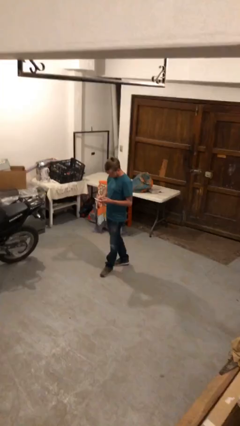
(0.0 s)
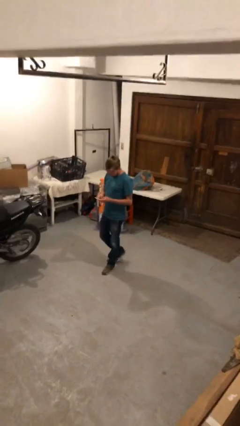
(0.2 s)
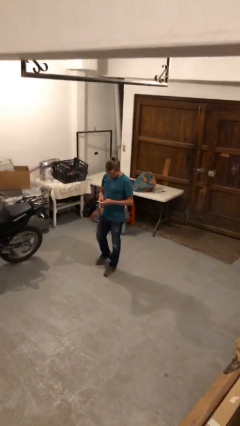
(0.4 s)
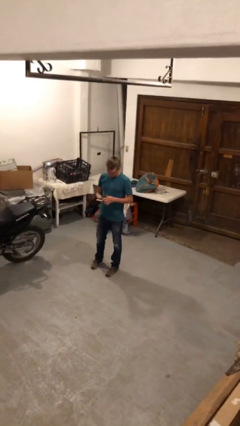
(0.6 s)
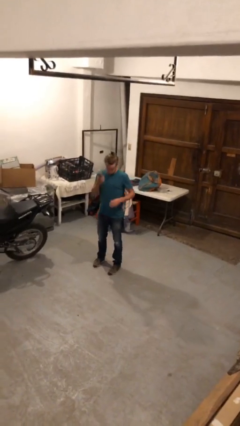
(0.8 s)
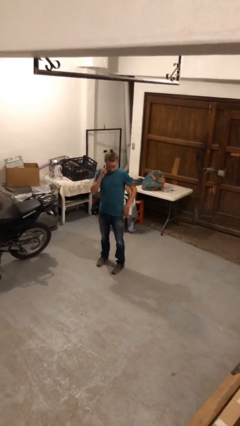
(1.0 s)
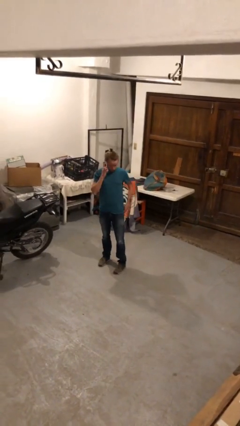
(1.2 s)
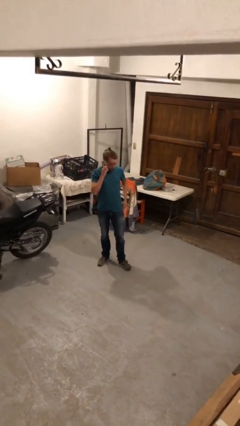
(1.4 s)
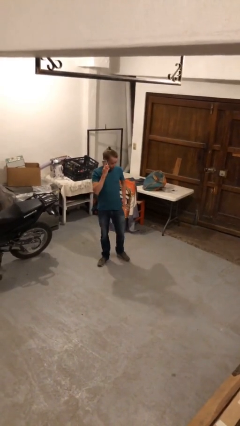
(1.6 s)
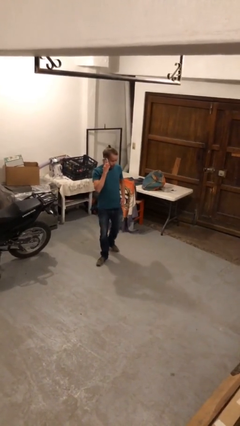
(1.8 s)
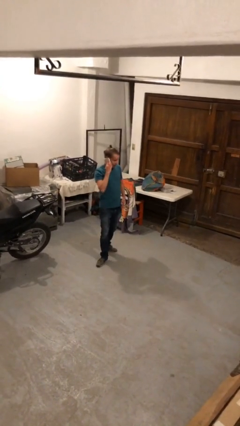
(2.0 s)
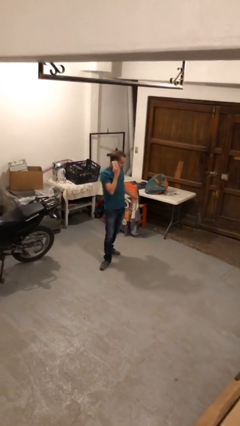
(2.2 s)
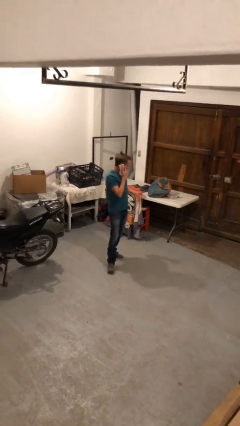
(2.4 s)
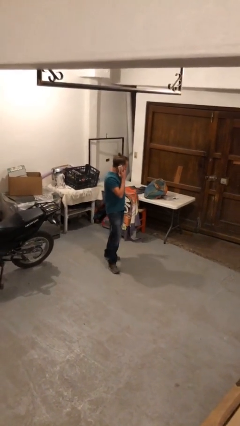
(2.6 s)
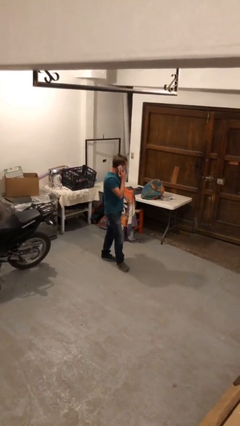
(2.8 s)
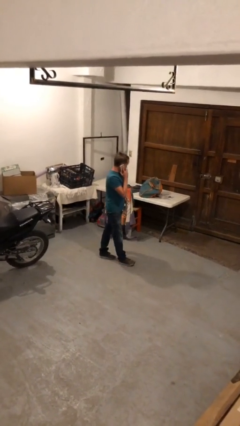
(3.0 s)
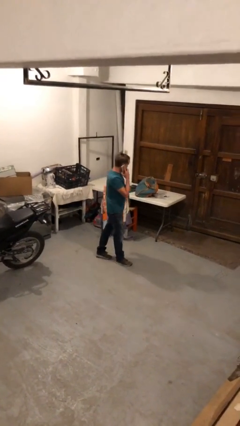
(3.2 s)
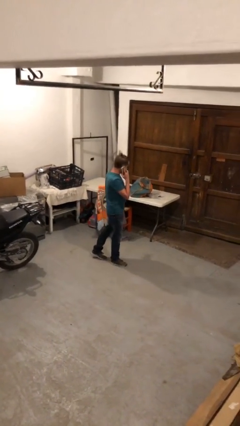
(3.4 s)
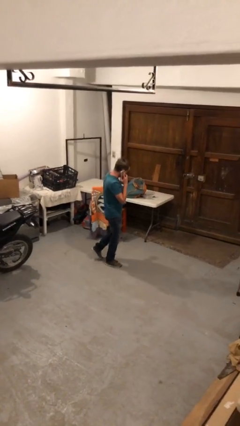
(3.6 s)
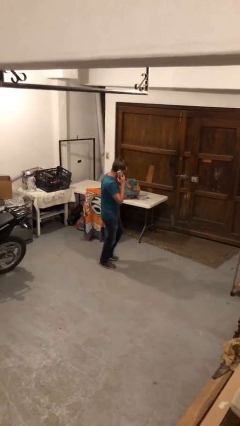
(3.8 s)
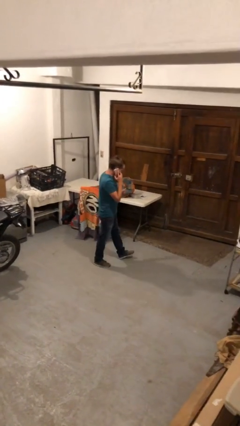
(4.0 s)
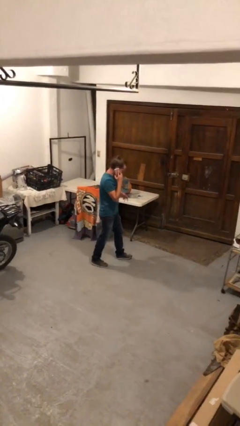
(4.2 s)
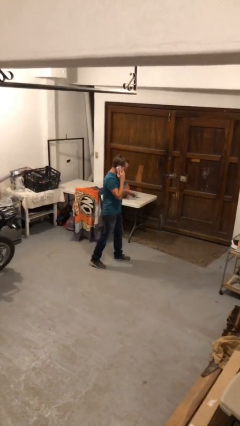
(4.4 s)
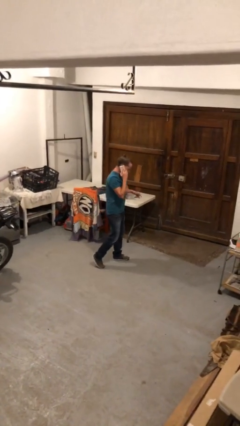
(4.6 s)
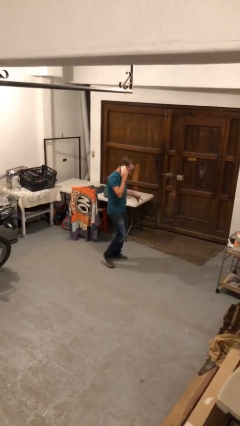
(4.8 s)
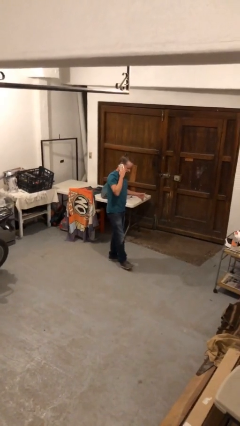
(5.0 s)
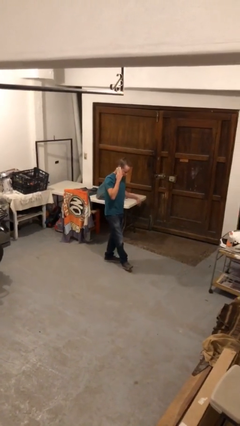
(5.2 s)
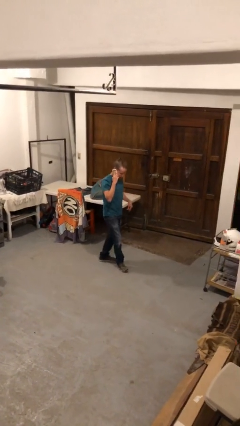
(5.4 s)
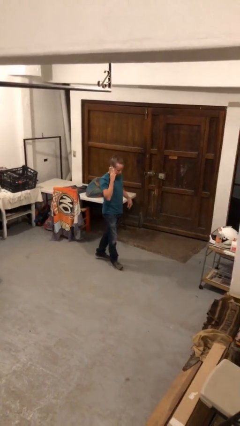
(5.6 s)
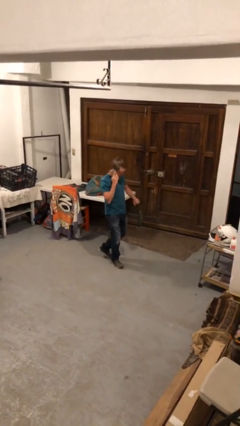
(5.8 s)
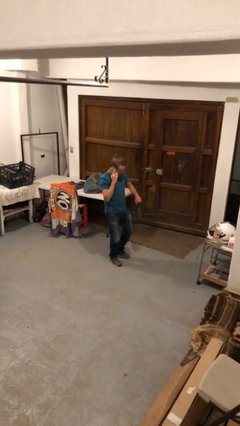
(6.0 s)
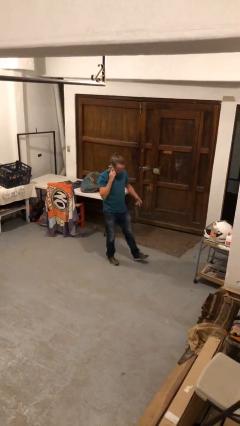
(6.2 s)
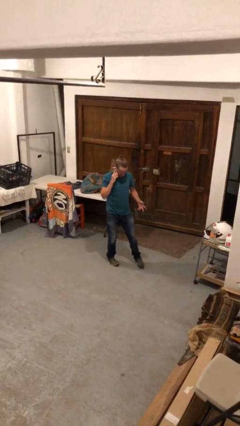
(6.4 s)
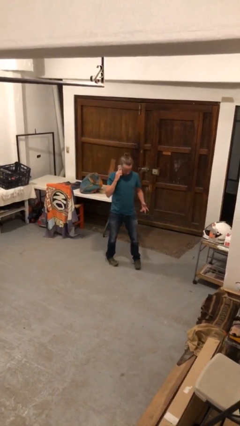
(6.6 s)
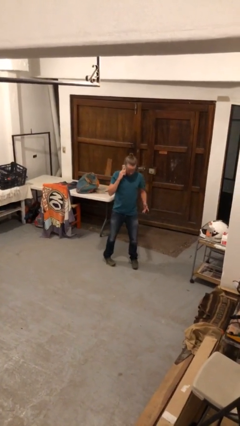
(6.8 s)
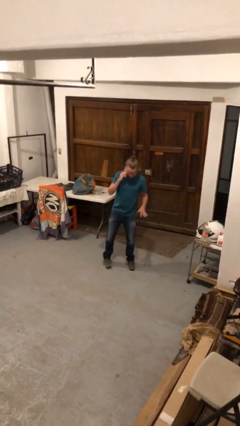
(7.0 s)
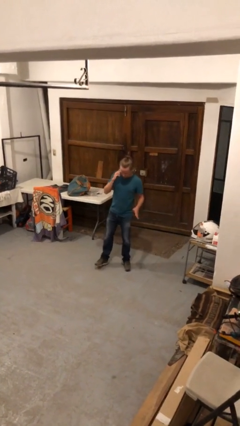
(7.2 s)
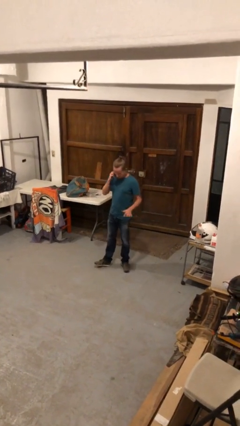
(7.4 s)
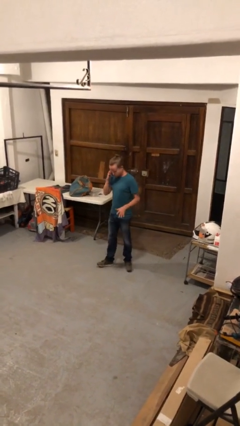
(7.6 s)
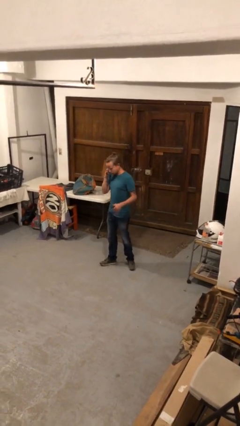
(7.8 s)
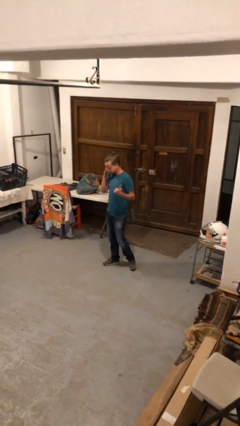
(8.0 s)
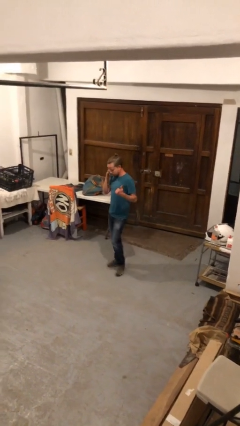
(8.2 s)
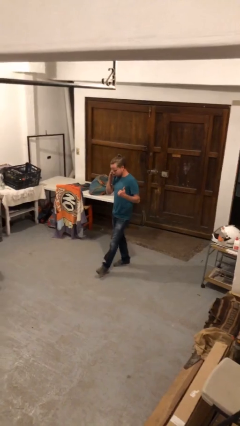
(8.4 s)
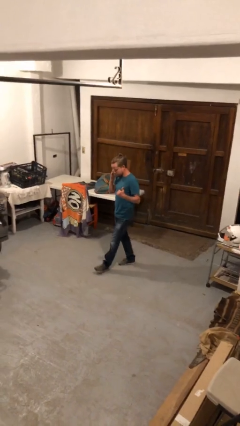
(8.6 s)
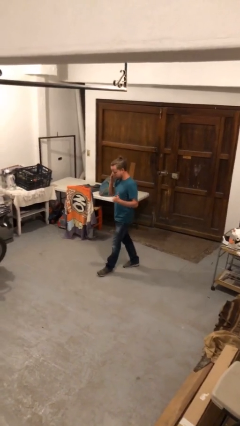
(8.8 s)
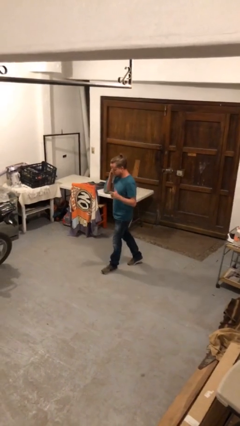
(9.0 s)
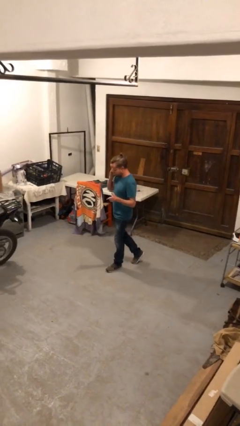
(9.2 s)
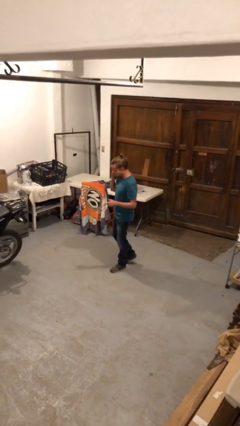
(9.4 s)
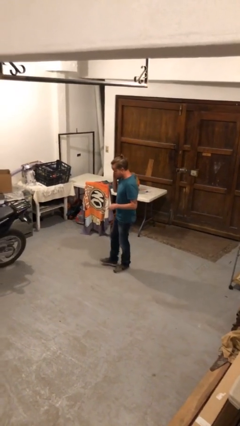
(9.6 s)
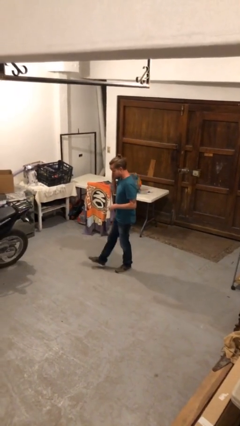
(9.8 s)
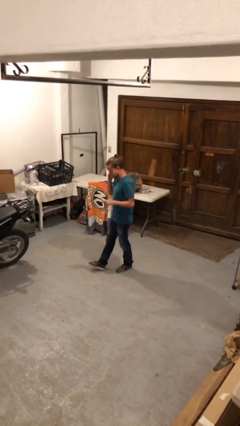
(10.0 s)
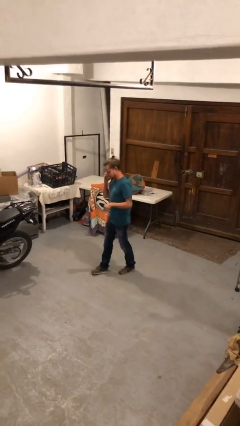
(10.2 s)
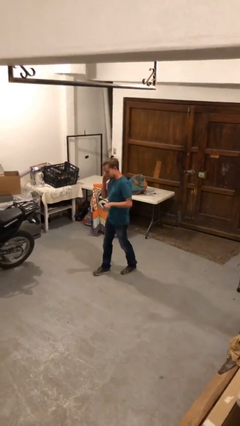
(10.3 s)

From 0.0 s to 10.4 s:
person talks on phone

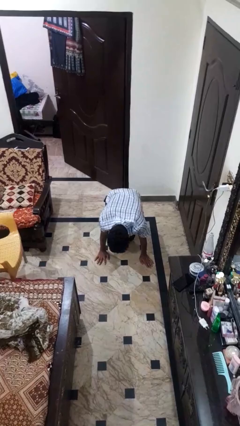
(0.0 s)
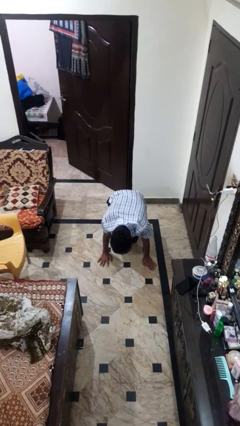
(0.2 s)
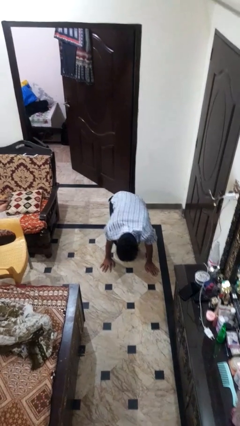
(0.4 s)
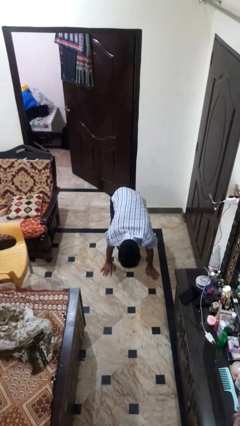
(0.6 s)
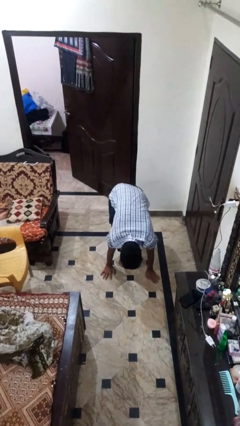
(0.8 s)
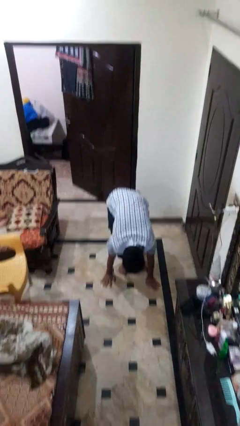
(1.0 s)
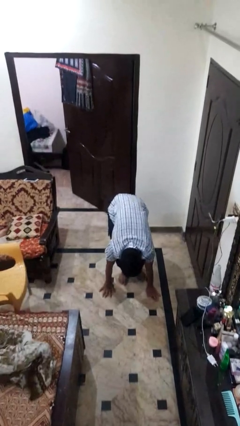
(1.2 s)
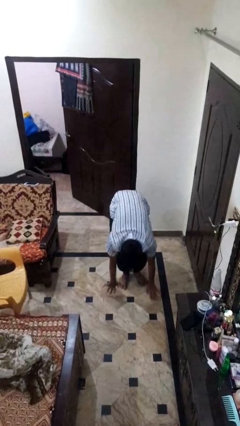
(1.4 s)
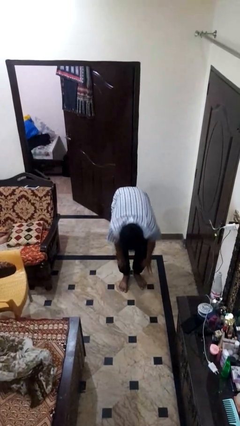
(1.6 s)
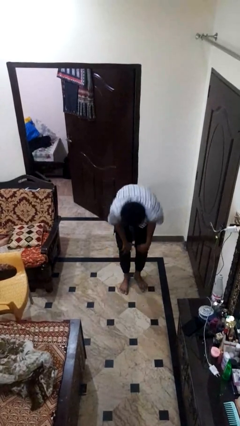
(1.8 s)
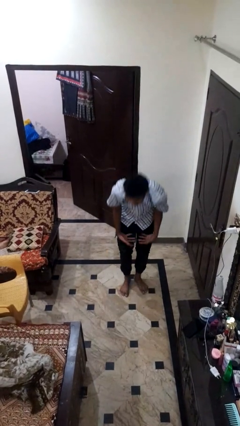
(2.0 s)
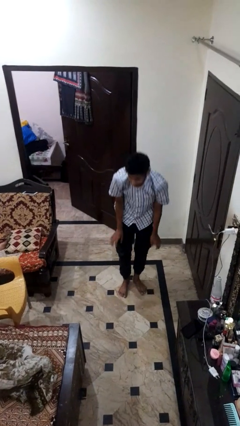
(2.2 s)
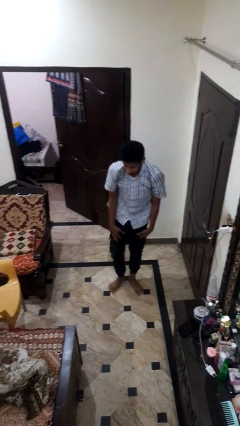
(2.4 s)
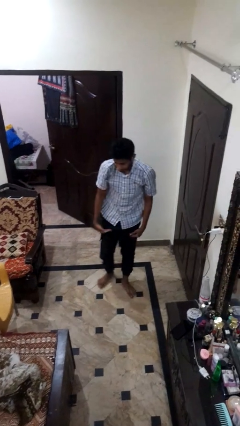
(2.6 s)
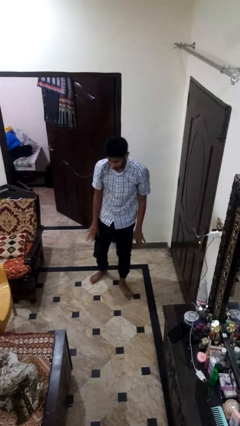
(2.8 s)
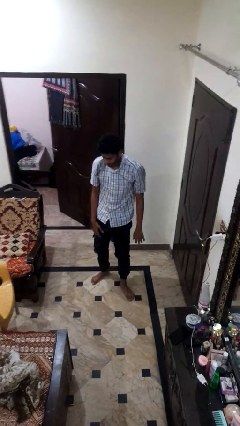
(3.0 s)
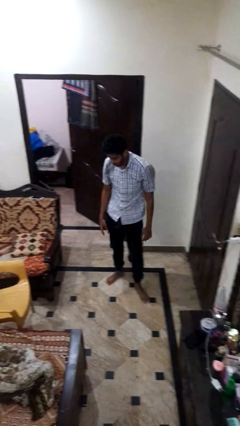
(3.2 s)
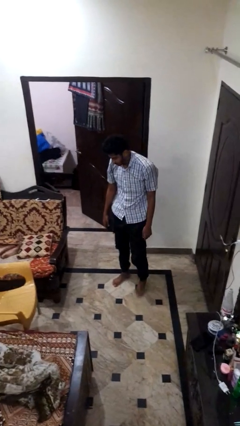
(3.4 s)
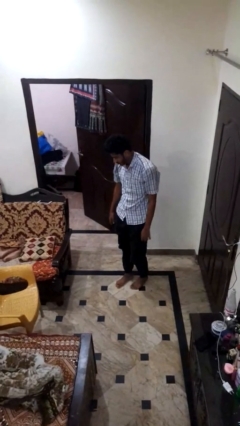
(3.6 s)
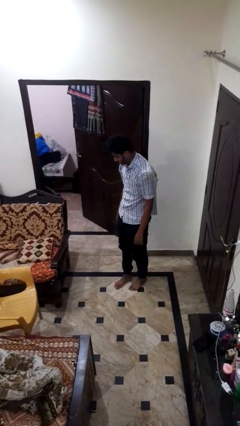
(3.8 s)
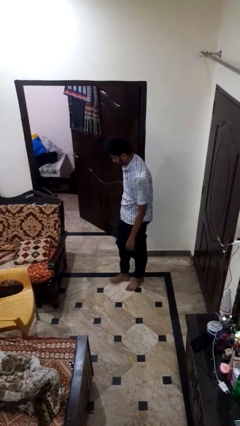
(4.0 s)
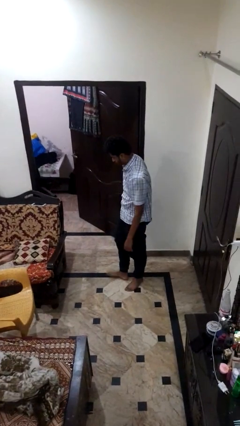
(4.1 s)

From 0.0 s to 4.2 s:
person stands up from floor

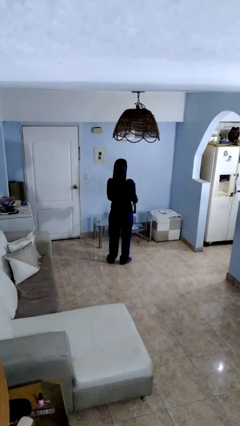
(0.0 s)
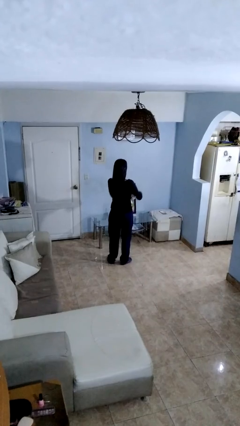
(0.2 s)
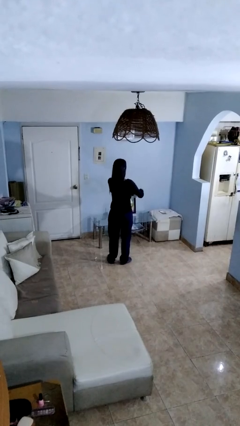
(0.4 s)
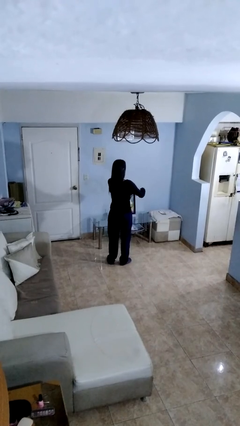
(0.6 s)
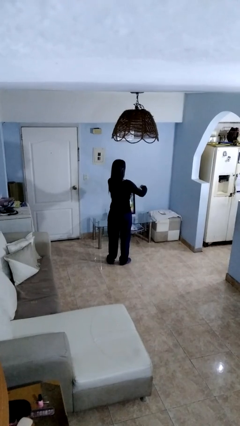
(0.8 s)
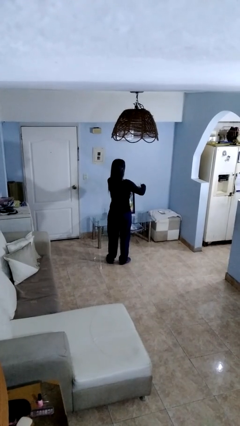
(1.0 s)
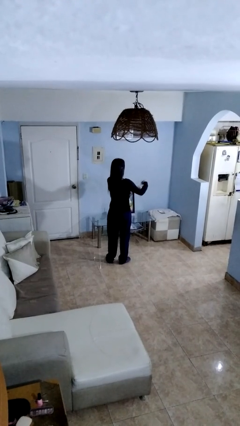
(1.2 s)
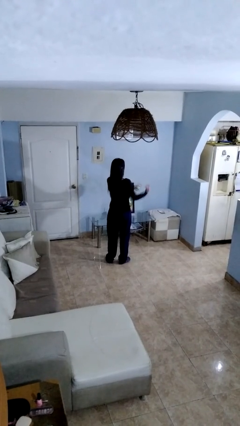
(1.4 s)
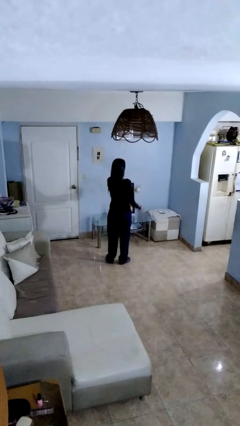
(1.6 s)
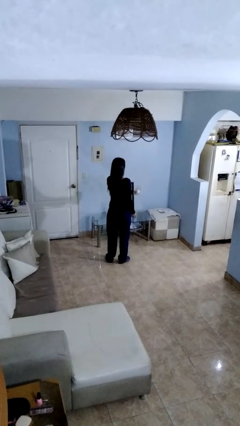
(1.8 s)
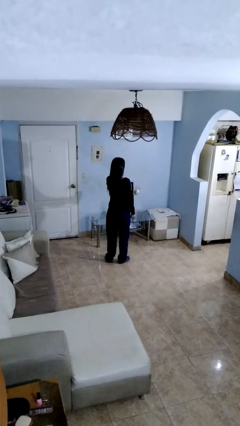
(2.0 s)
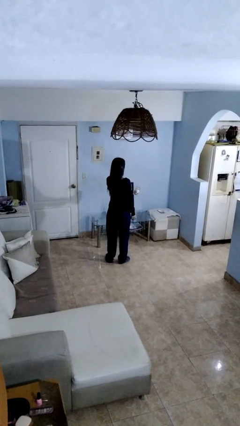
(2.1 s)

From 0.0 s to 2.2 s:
person opens jar

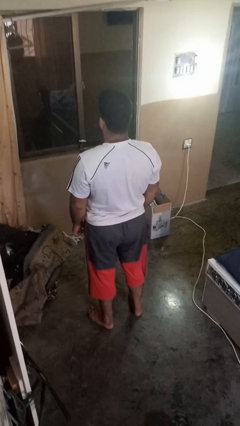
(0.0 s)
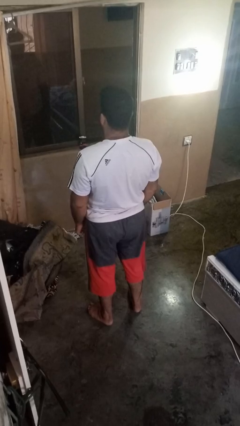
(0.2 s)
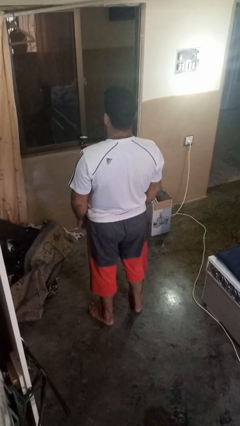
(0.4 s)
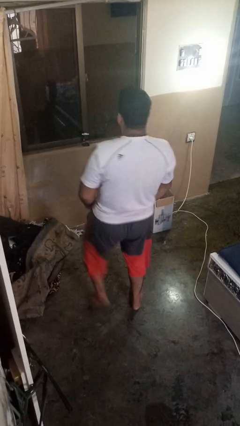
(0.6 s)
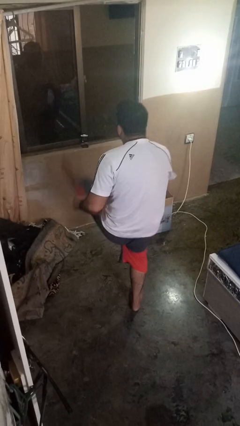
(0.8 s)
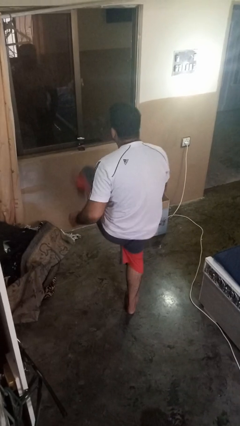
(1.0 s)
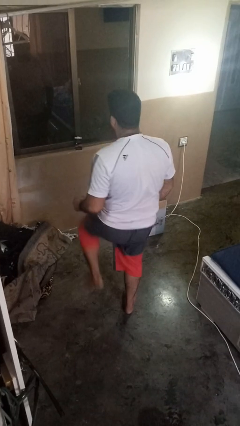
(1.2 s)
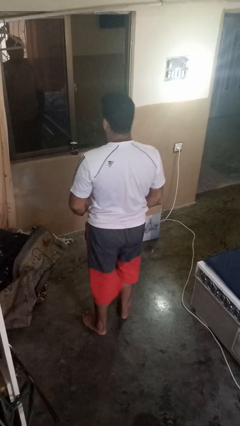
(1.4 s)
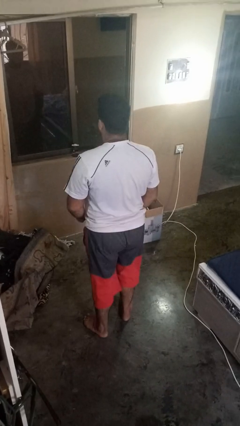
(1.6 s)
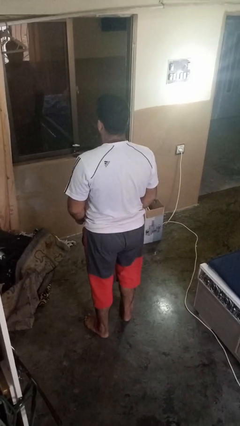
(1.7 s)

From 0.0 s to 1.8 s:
person karate kicks
